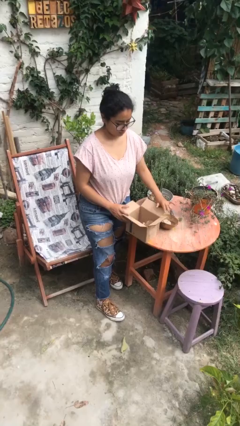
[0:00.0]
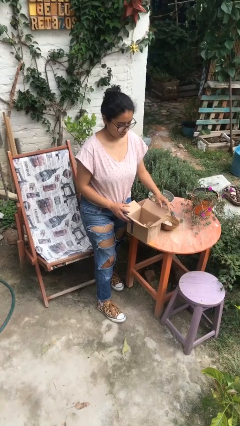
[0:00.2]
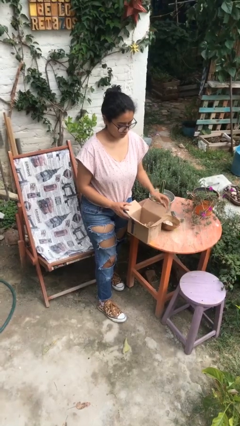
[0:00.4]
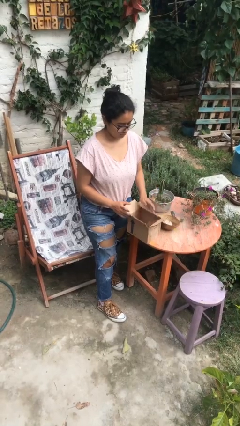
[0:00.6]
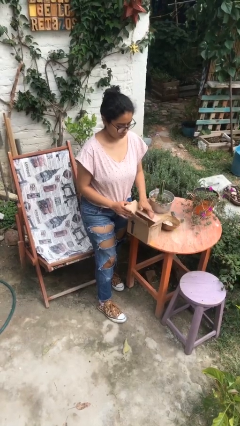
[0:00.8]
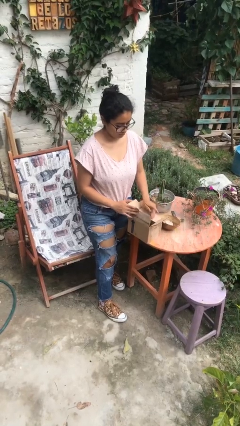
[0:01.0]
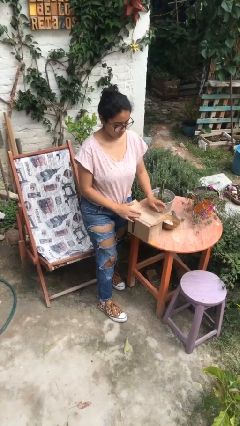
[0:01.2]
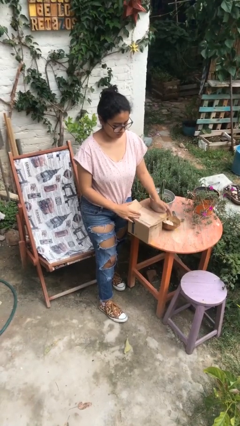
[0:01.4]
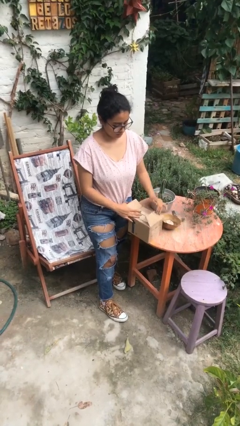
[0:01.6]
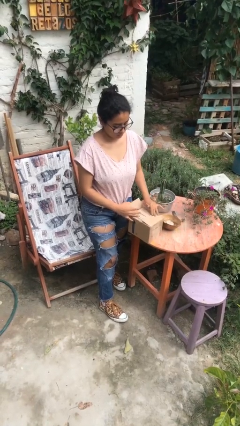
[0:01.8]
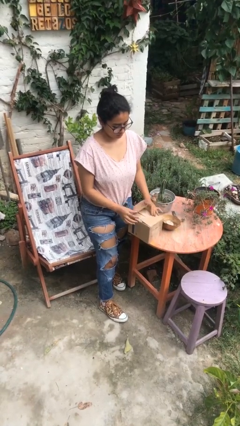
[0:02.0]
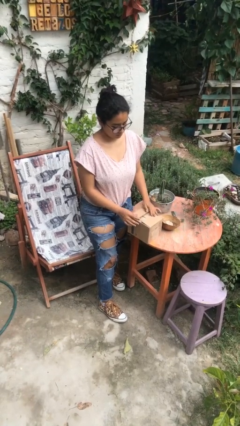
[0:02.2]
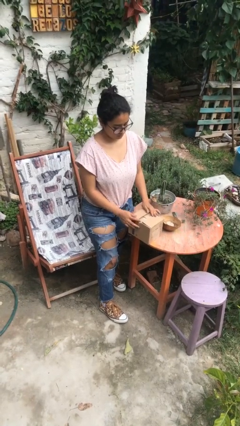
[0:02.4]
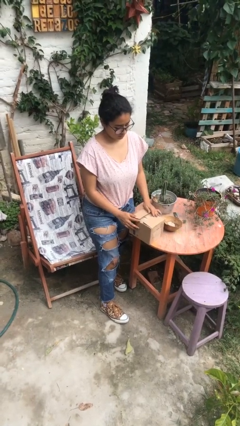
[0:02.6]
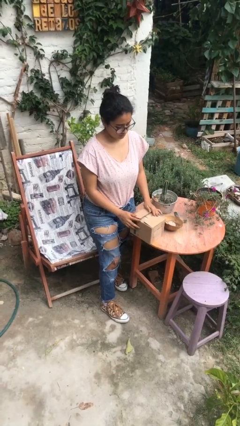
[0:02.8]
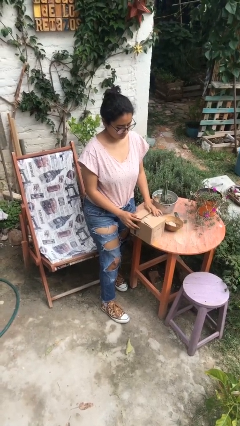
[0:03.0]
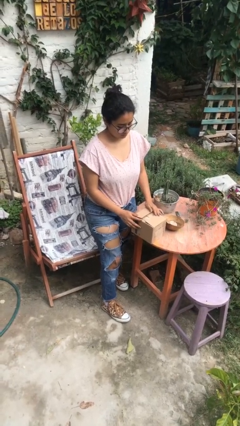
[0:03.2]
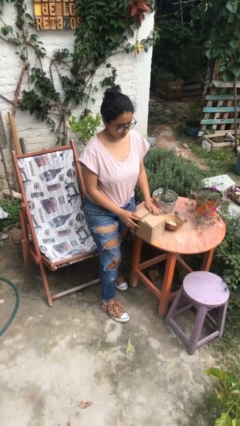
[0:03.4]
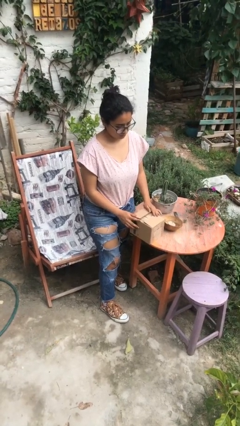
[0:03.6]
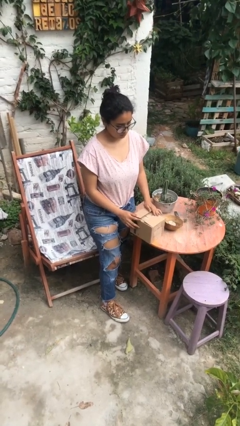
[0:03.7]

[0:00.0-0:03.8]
person closes box

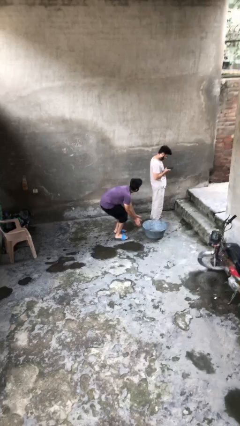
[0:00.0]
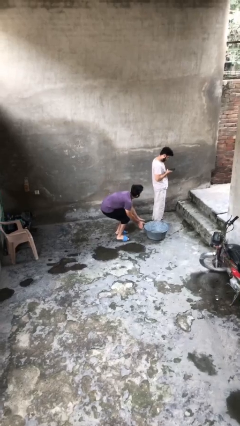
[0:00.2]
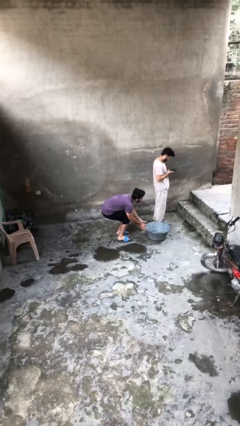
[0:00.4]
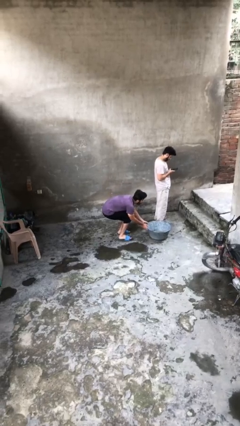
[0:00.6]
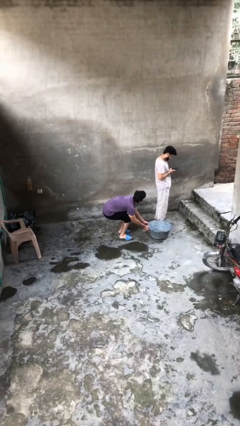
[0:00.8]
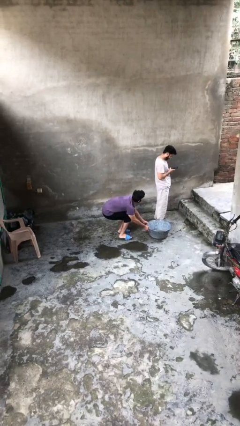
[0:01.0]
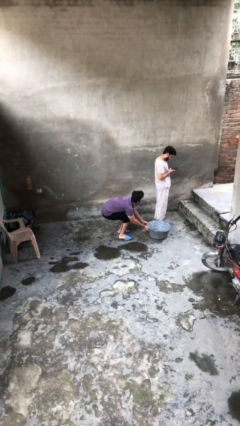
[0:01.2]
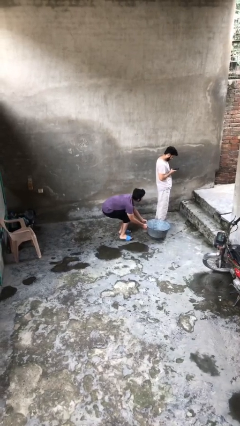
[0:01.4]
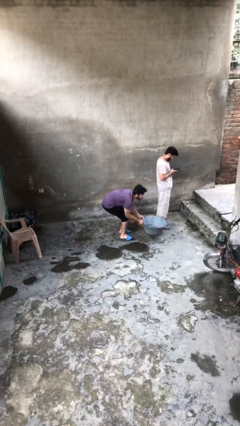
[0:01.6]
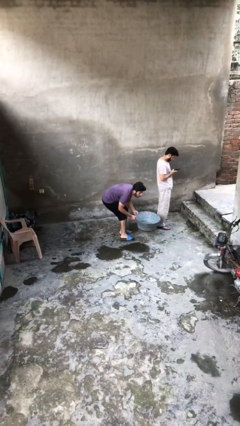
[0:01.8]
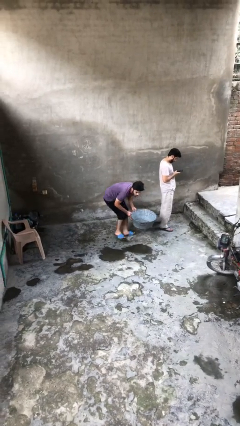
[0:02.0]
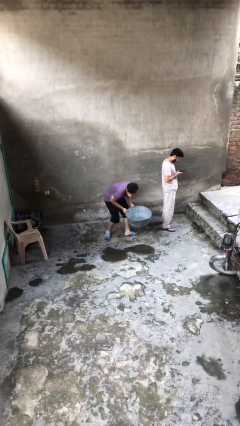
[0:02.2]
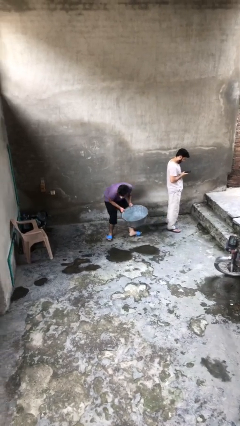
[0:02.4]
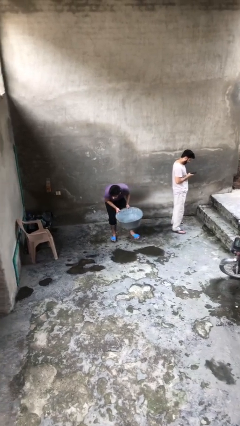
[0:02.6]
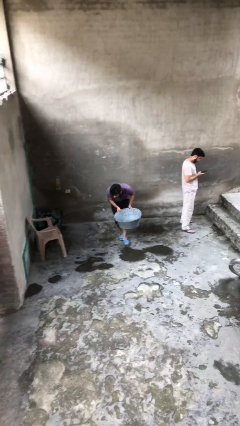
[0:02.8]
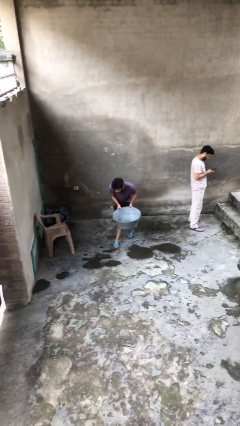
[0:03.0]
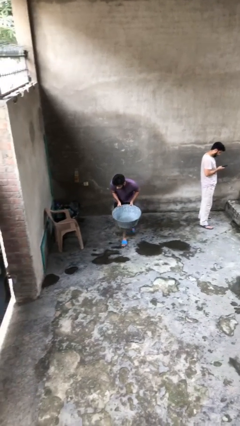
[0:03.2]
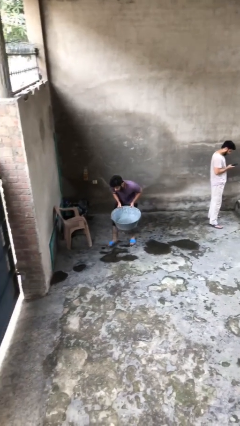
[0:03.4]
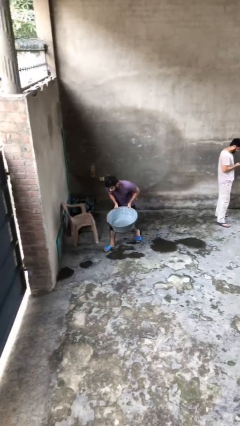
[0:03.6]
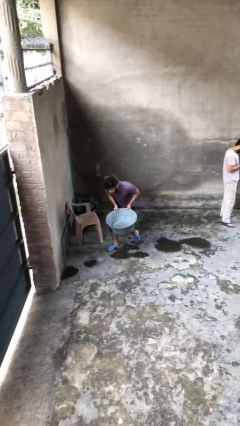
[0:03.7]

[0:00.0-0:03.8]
person steals object from person

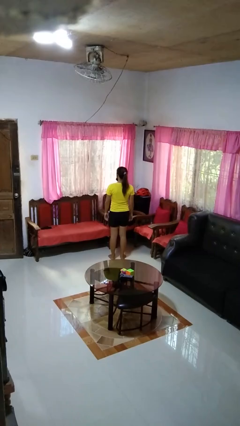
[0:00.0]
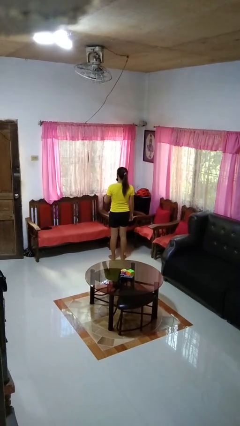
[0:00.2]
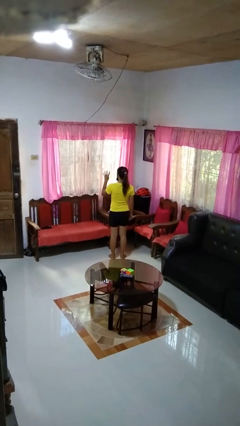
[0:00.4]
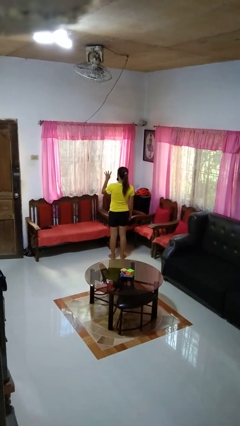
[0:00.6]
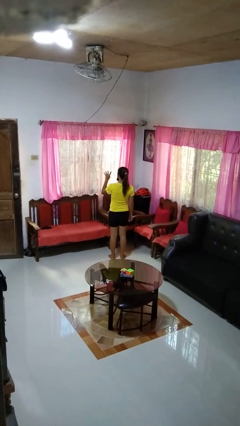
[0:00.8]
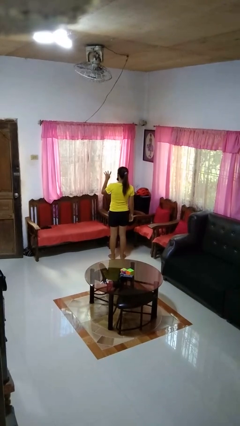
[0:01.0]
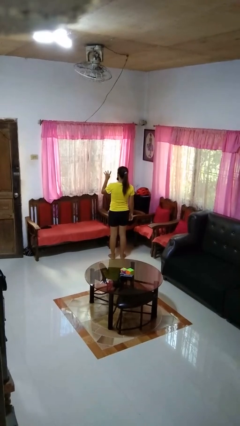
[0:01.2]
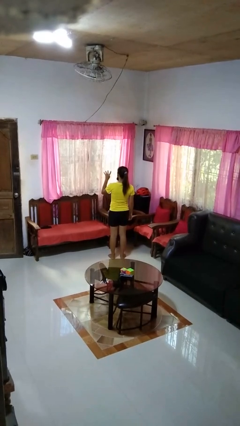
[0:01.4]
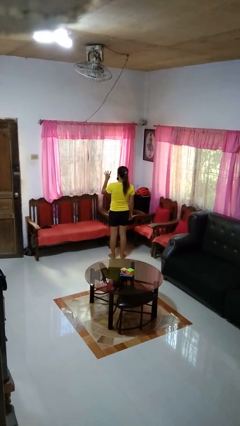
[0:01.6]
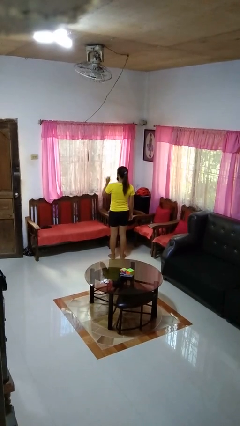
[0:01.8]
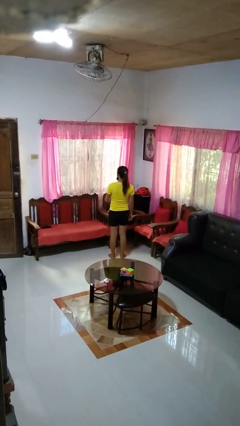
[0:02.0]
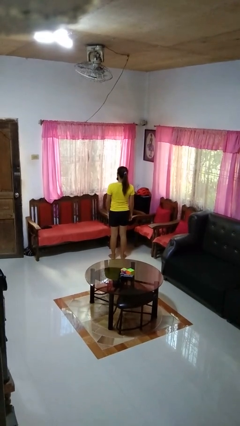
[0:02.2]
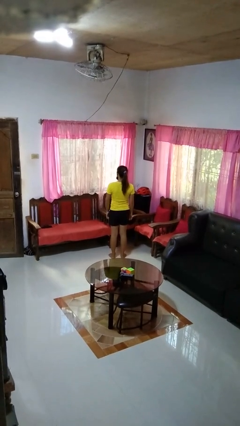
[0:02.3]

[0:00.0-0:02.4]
person gestures number four

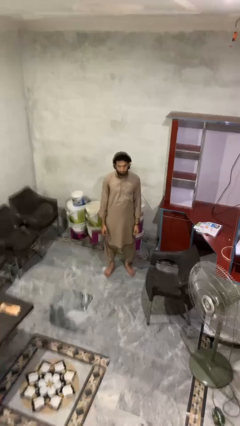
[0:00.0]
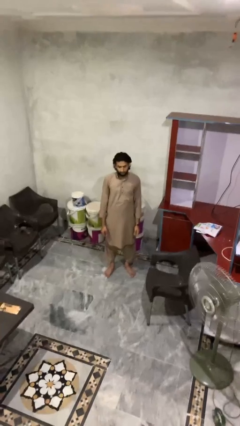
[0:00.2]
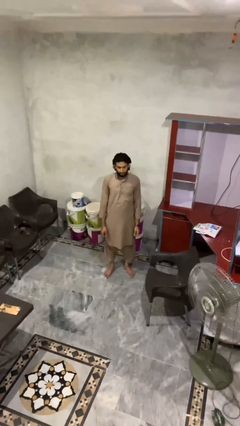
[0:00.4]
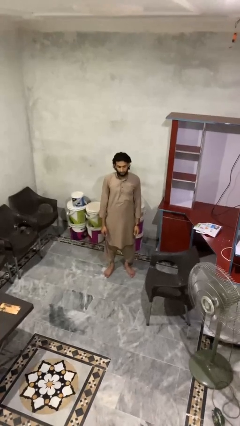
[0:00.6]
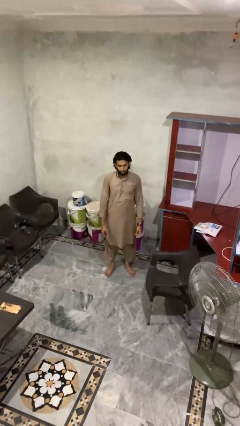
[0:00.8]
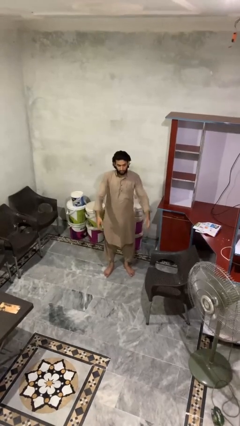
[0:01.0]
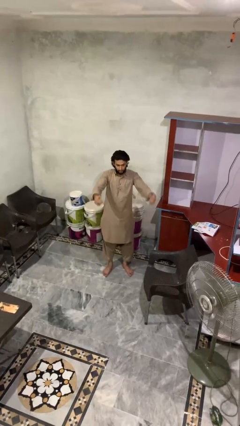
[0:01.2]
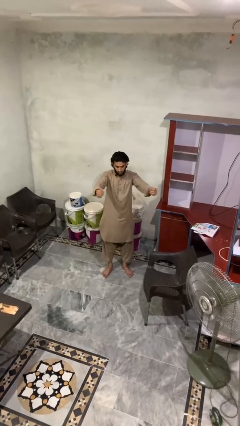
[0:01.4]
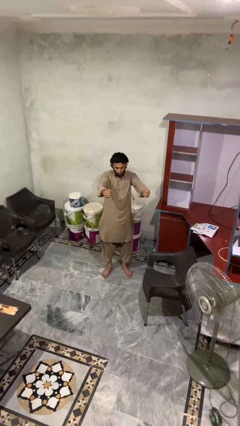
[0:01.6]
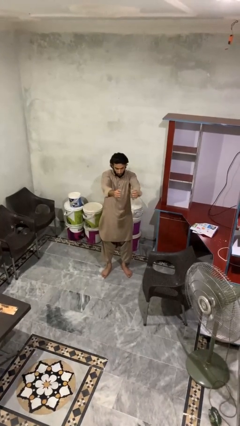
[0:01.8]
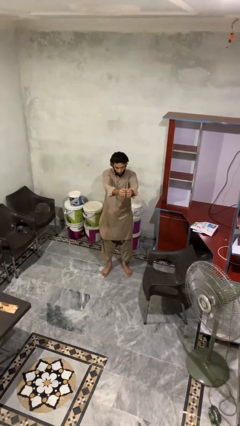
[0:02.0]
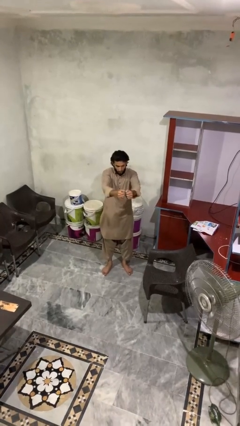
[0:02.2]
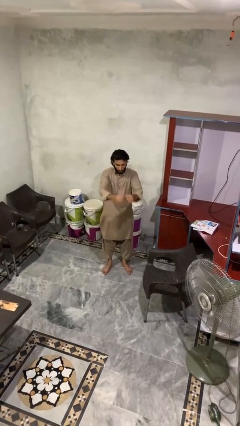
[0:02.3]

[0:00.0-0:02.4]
person gestures zoom out

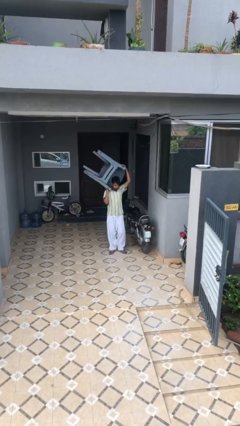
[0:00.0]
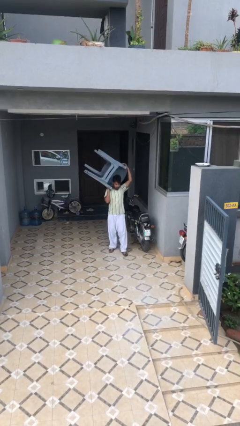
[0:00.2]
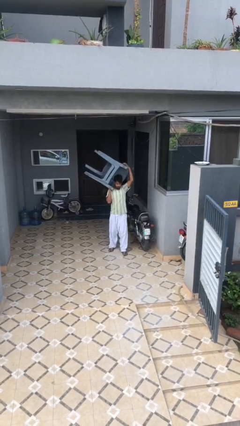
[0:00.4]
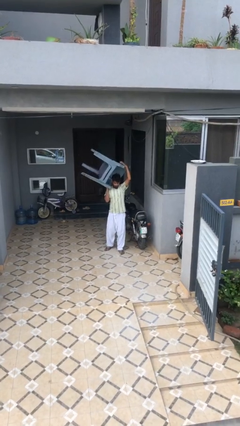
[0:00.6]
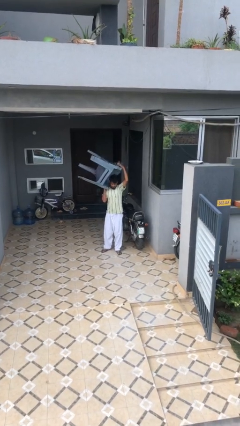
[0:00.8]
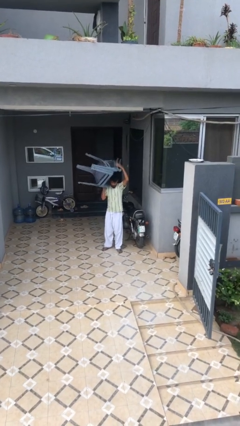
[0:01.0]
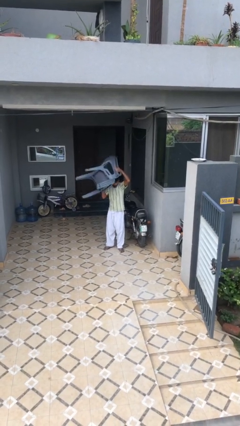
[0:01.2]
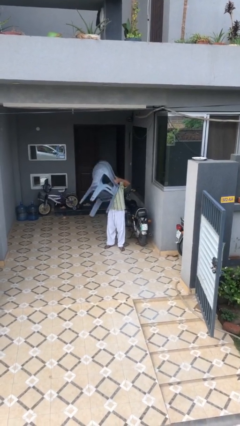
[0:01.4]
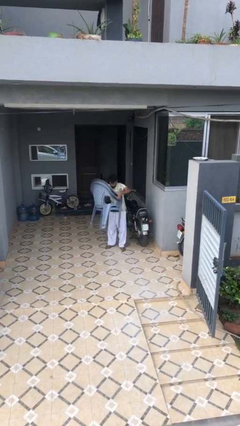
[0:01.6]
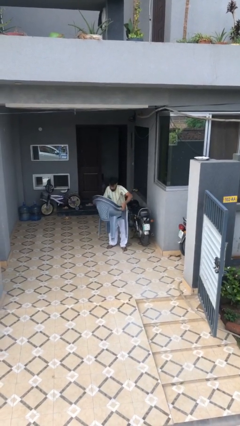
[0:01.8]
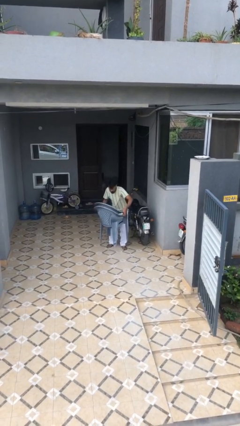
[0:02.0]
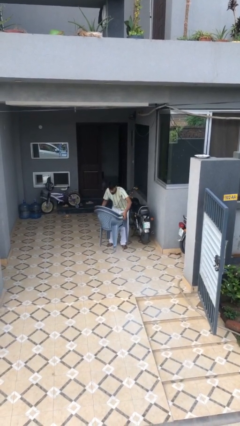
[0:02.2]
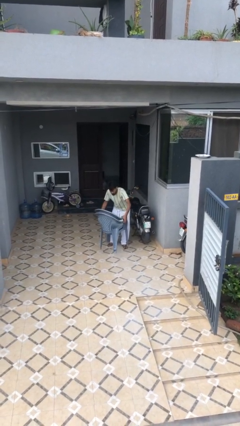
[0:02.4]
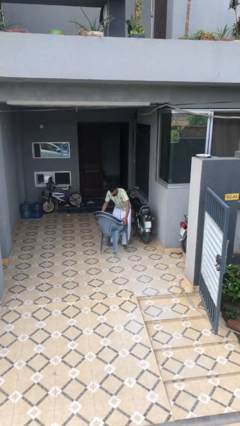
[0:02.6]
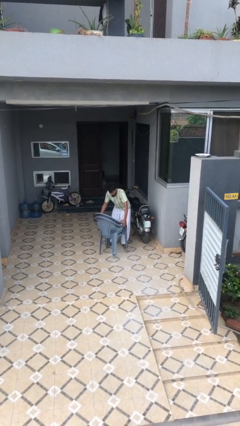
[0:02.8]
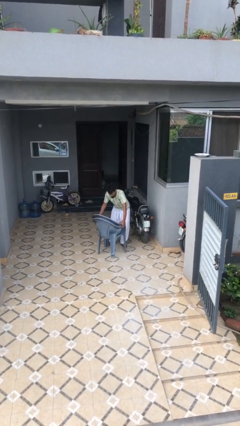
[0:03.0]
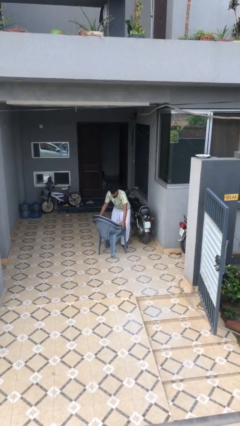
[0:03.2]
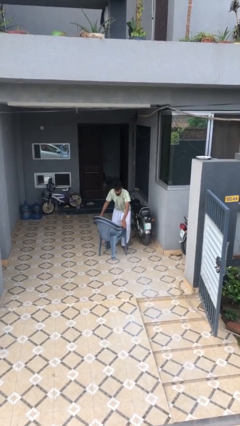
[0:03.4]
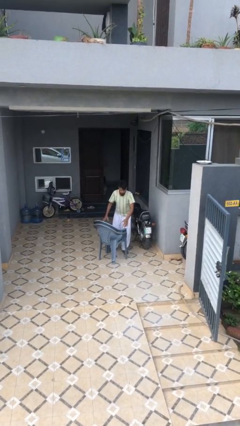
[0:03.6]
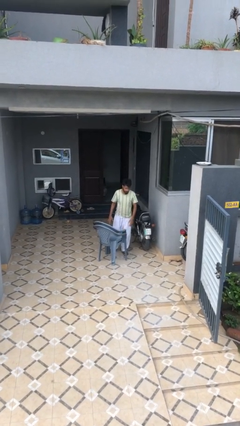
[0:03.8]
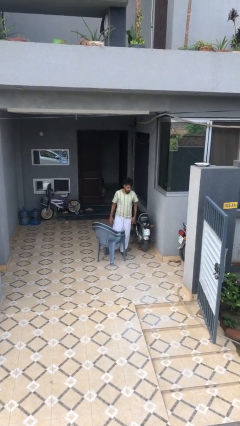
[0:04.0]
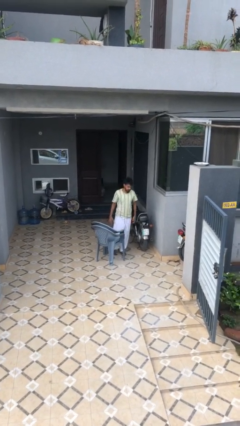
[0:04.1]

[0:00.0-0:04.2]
person puts down object on floor

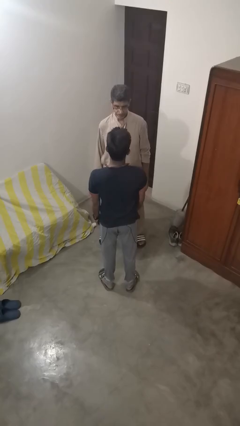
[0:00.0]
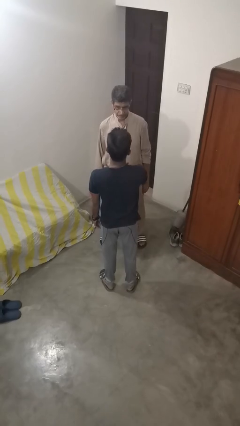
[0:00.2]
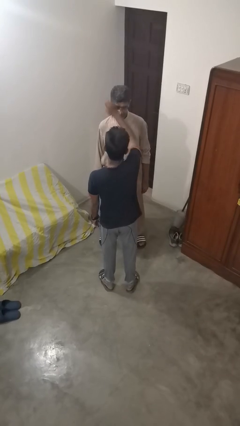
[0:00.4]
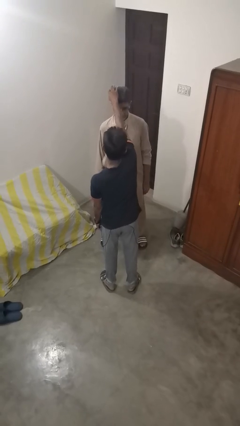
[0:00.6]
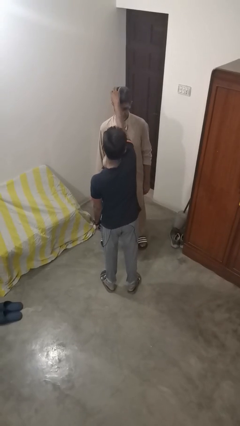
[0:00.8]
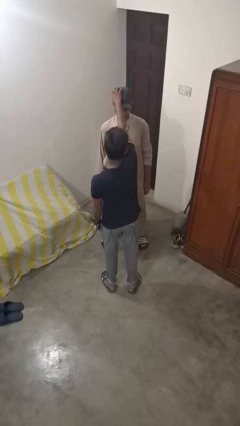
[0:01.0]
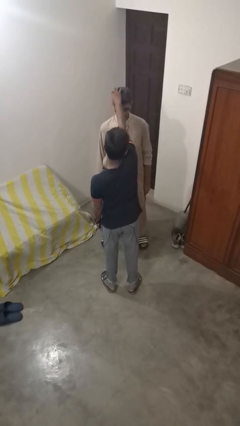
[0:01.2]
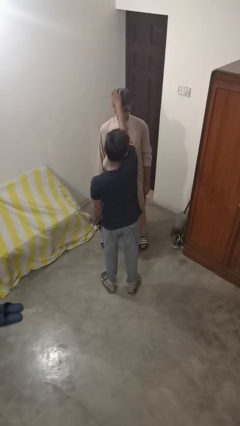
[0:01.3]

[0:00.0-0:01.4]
person grabs person by hair
